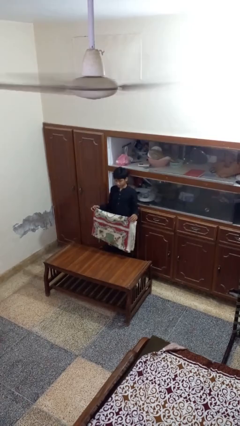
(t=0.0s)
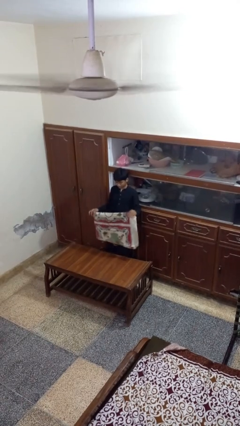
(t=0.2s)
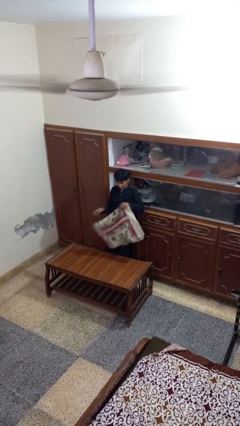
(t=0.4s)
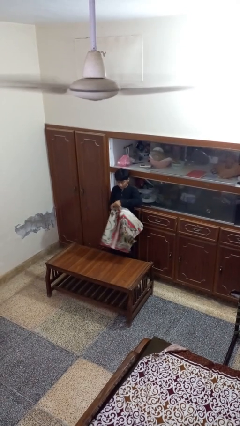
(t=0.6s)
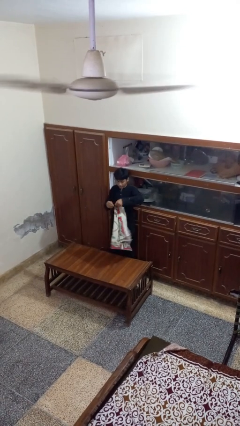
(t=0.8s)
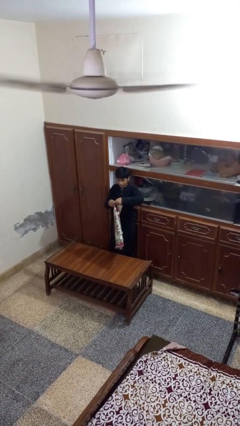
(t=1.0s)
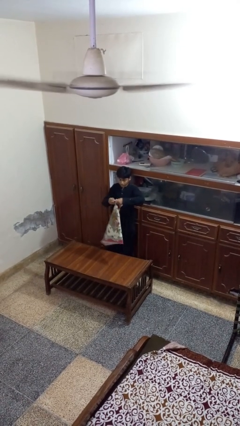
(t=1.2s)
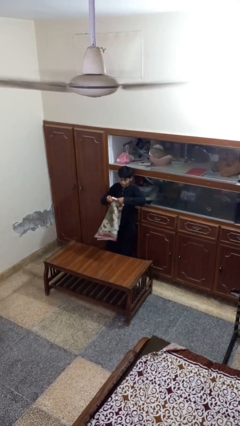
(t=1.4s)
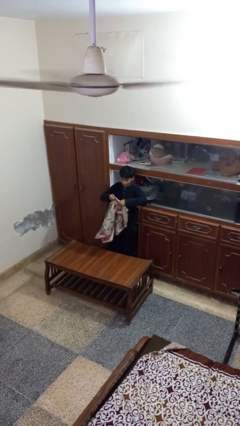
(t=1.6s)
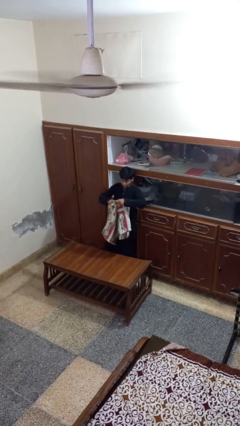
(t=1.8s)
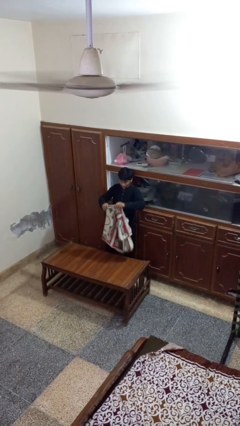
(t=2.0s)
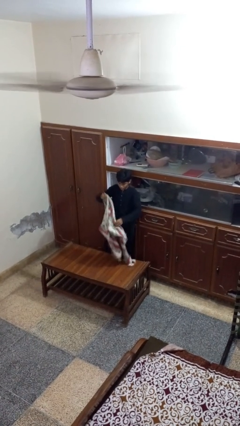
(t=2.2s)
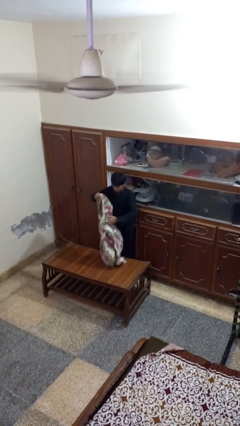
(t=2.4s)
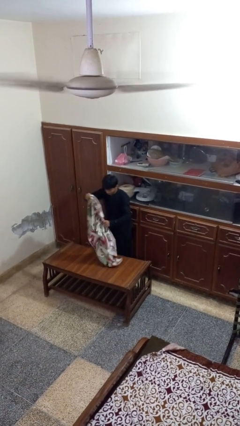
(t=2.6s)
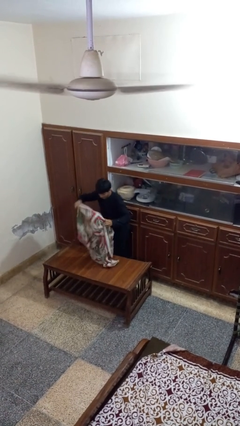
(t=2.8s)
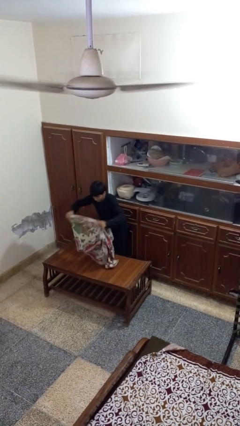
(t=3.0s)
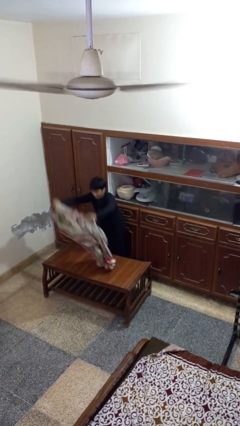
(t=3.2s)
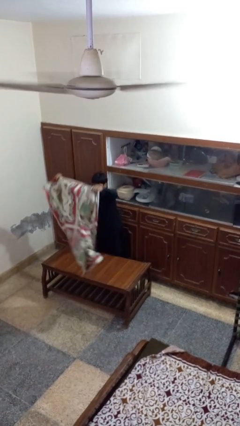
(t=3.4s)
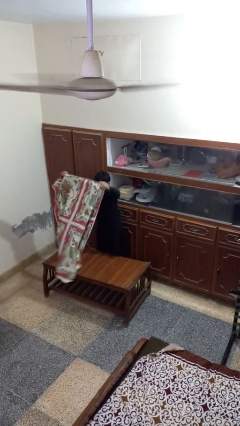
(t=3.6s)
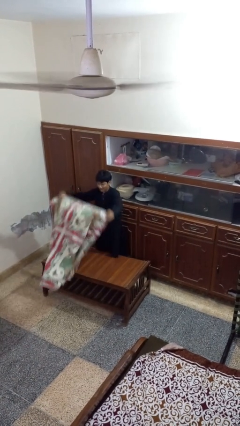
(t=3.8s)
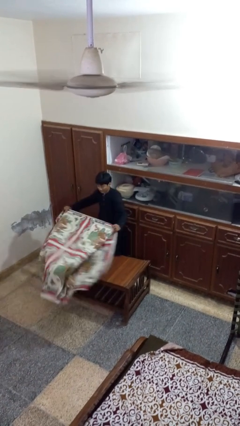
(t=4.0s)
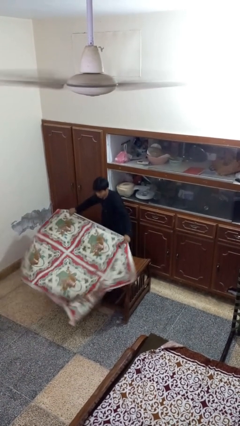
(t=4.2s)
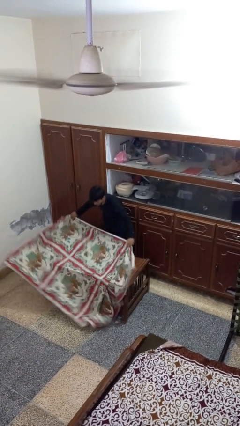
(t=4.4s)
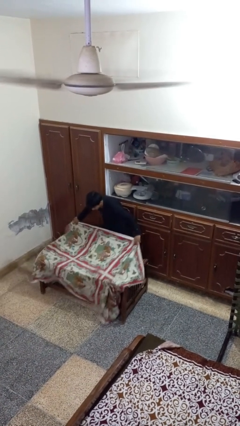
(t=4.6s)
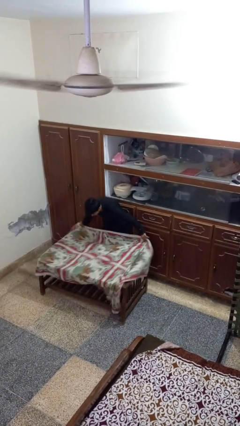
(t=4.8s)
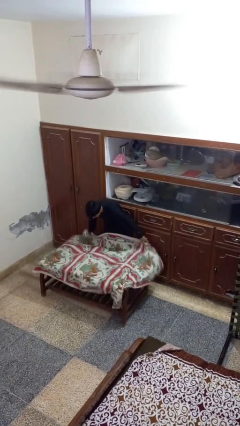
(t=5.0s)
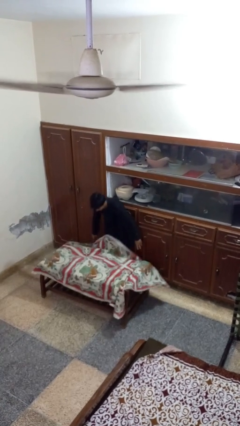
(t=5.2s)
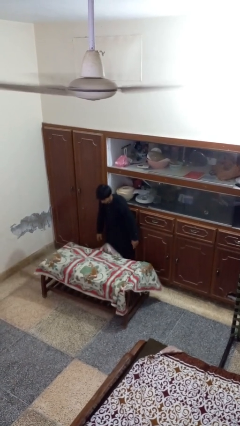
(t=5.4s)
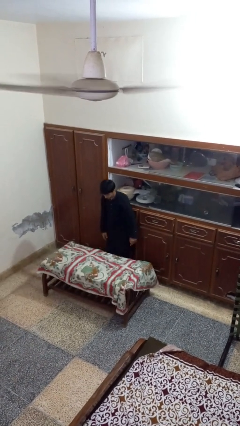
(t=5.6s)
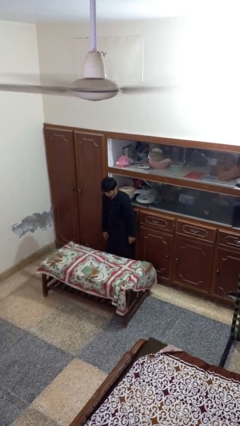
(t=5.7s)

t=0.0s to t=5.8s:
person spreads tablecloth

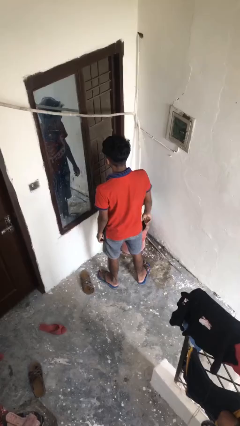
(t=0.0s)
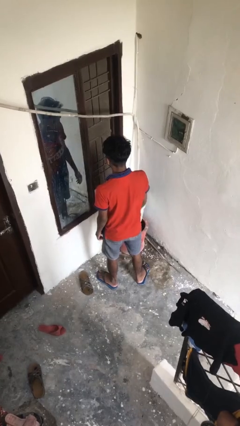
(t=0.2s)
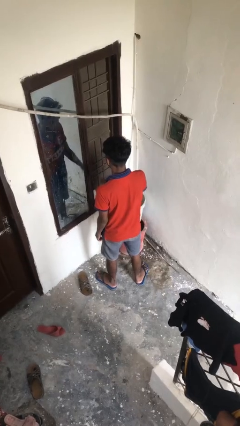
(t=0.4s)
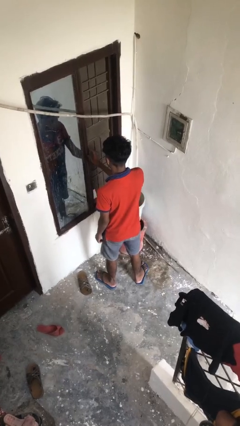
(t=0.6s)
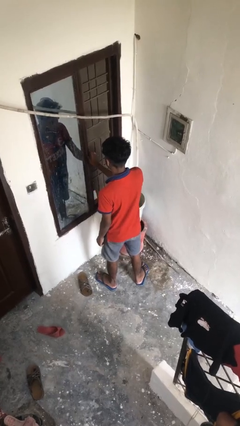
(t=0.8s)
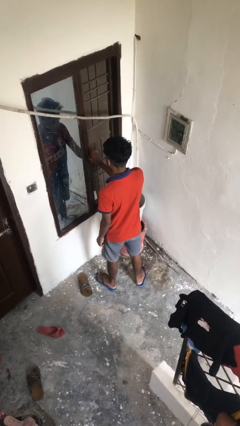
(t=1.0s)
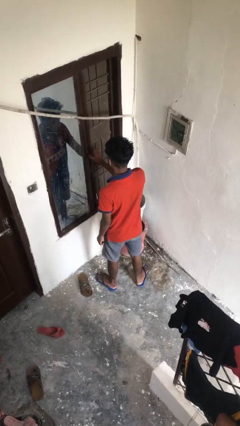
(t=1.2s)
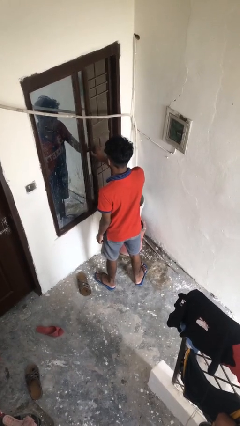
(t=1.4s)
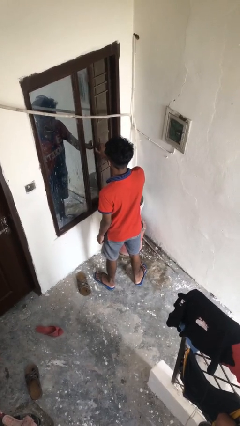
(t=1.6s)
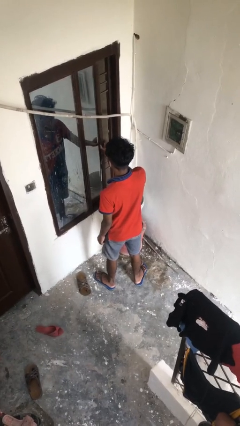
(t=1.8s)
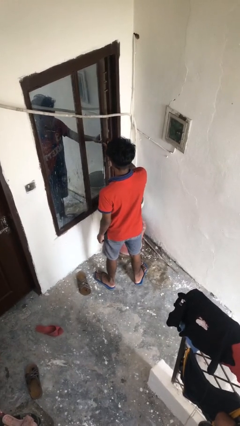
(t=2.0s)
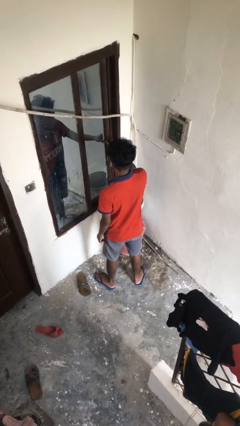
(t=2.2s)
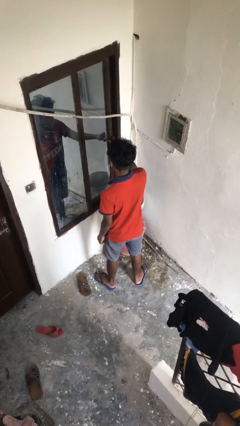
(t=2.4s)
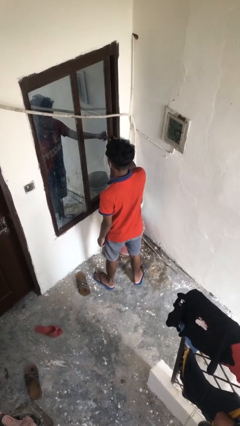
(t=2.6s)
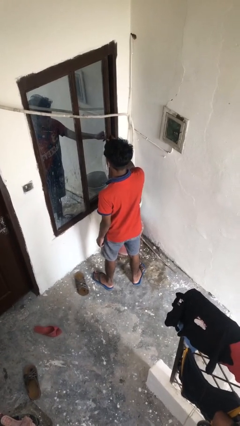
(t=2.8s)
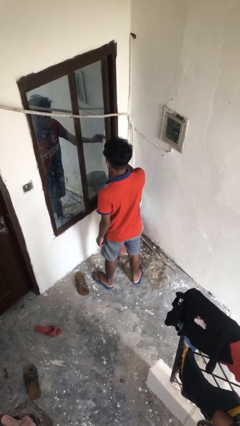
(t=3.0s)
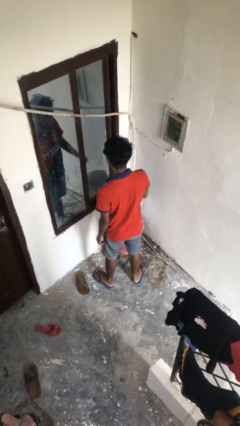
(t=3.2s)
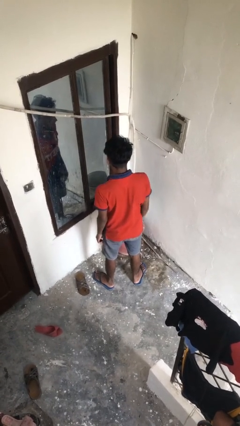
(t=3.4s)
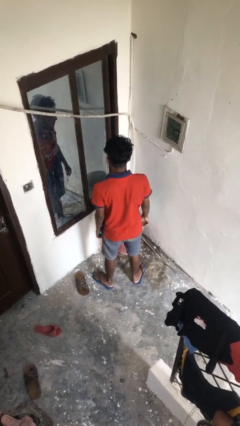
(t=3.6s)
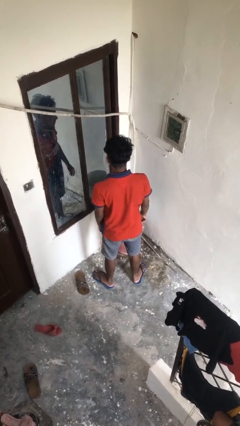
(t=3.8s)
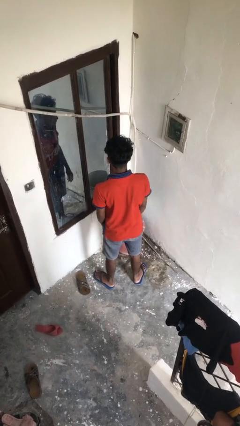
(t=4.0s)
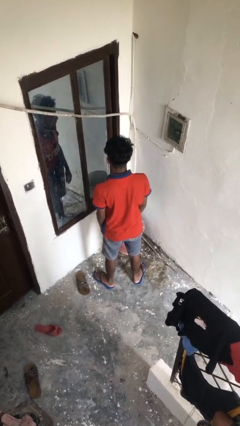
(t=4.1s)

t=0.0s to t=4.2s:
person closes home window

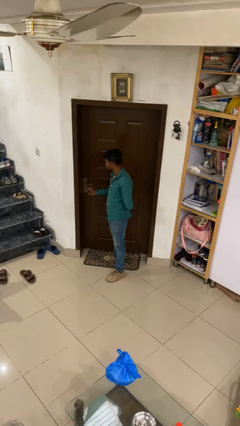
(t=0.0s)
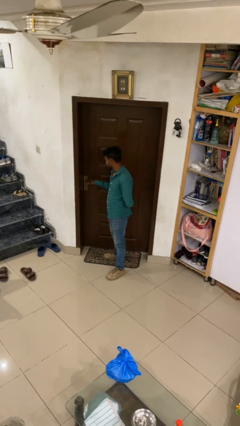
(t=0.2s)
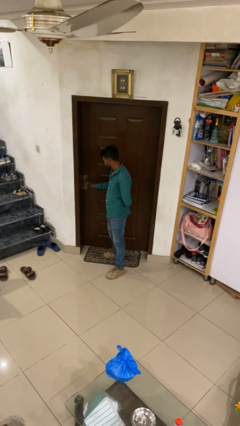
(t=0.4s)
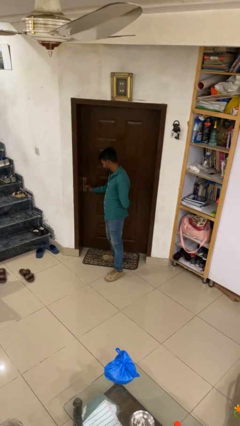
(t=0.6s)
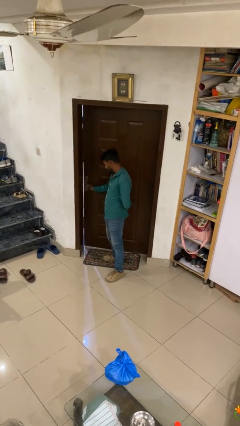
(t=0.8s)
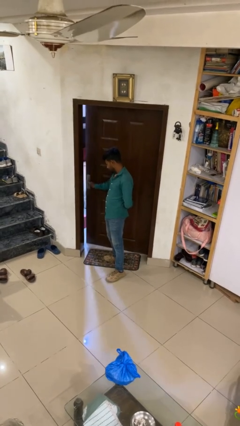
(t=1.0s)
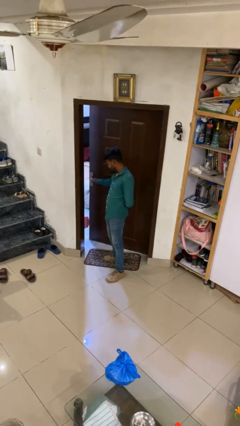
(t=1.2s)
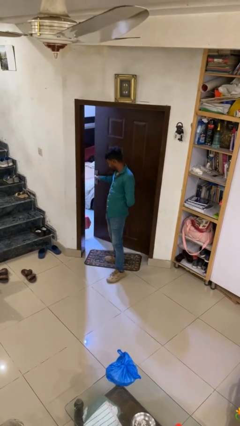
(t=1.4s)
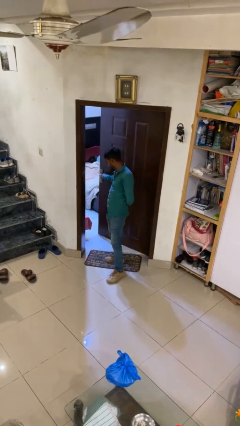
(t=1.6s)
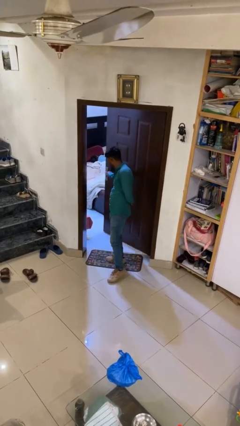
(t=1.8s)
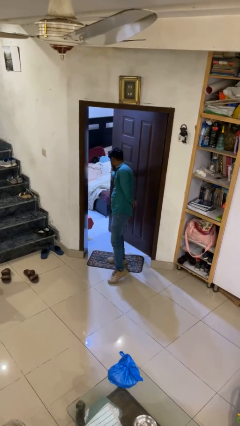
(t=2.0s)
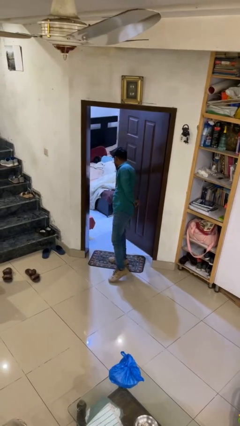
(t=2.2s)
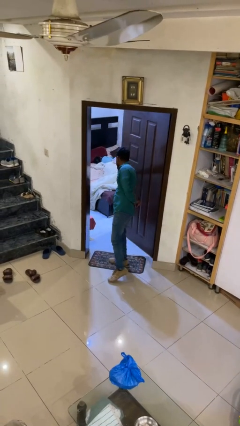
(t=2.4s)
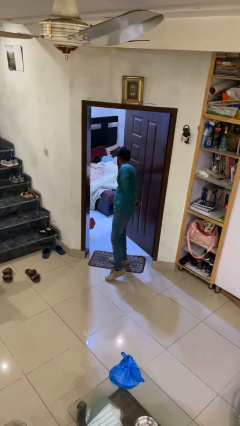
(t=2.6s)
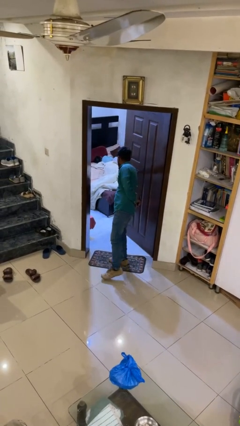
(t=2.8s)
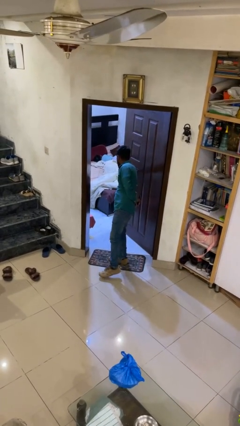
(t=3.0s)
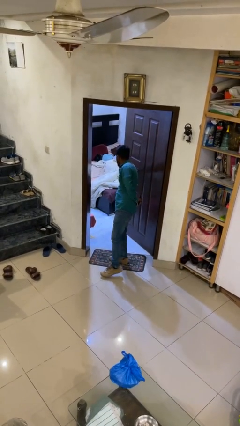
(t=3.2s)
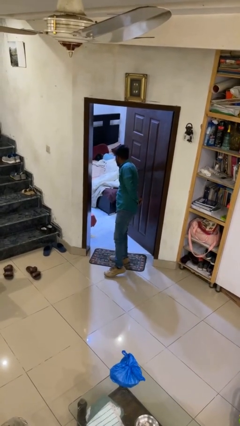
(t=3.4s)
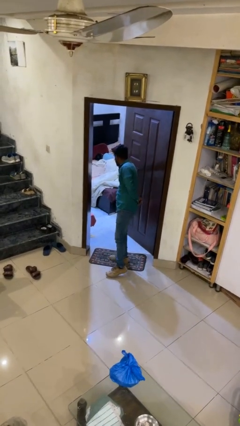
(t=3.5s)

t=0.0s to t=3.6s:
person opens facility door

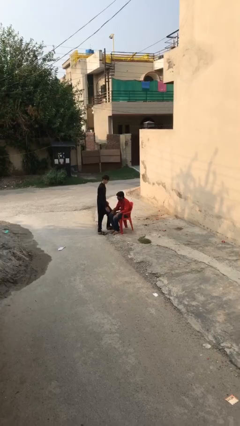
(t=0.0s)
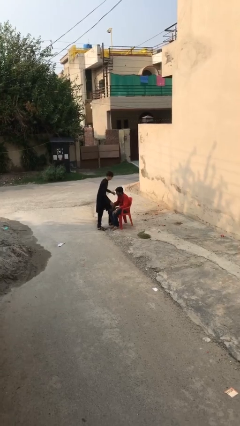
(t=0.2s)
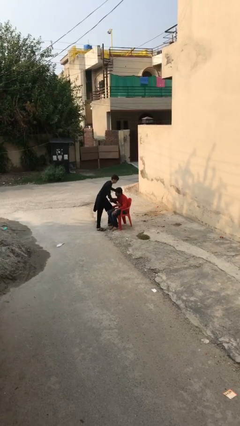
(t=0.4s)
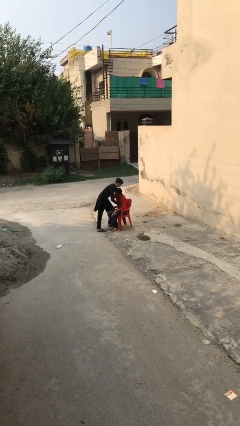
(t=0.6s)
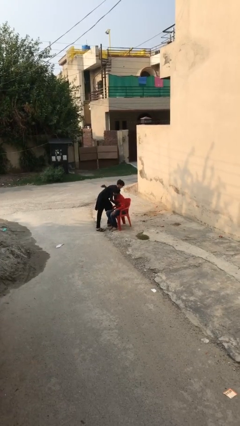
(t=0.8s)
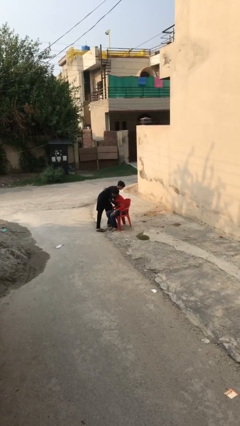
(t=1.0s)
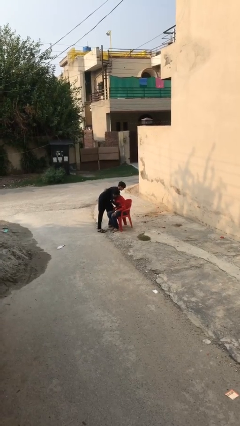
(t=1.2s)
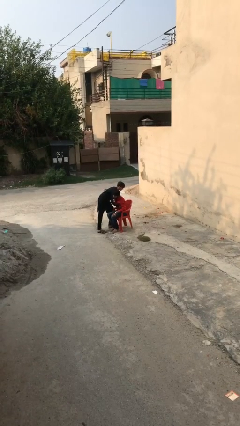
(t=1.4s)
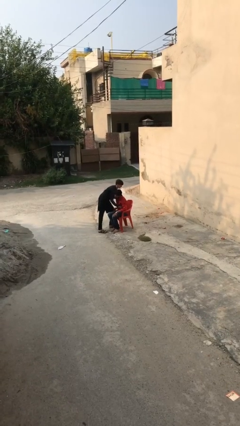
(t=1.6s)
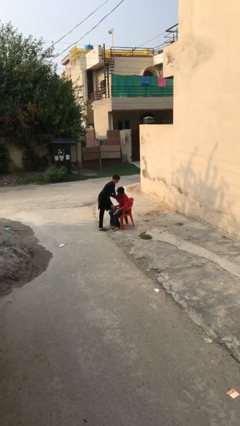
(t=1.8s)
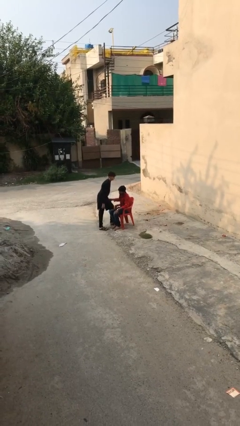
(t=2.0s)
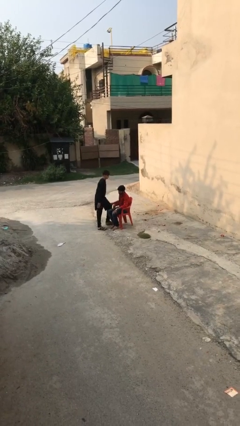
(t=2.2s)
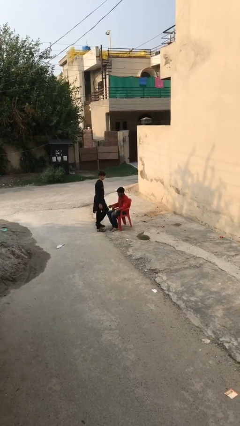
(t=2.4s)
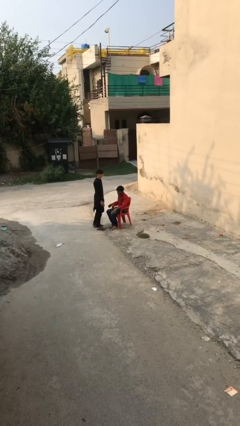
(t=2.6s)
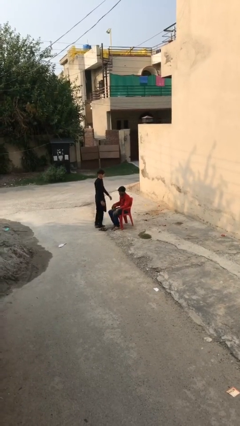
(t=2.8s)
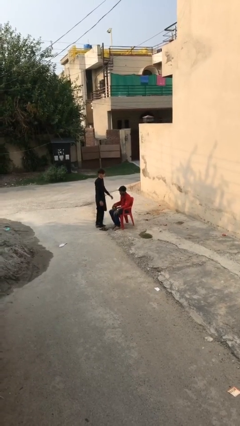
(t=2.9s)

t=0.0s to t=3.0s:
person embraces person

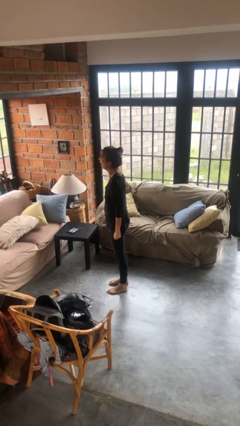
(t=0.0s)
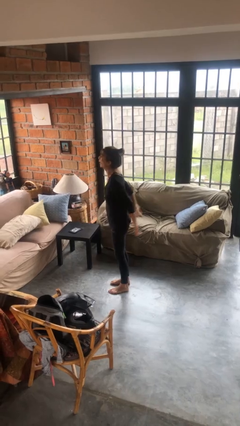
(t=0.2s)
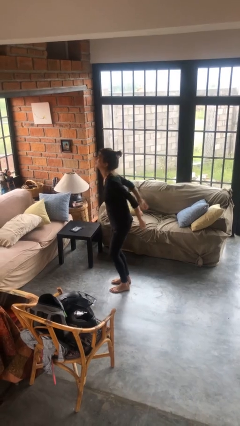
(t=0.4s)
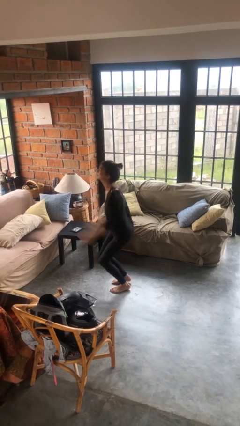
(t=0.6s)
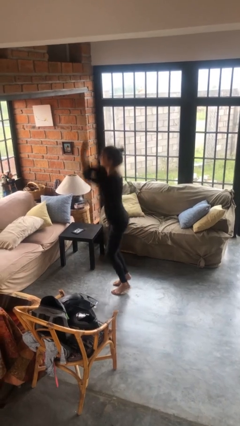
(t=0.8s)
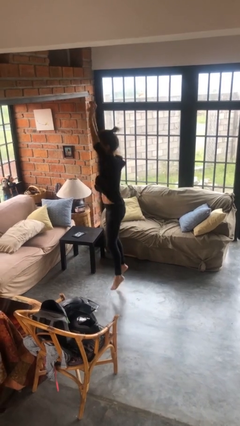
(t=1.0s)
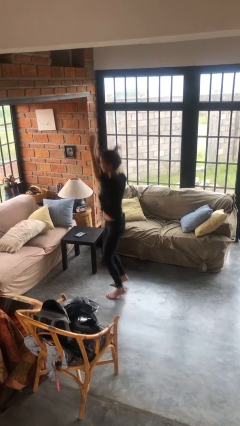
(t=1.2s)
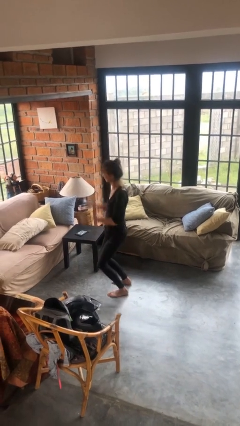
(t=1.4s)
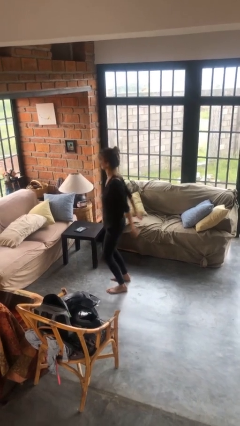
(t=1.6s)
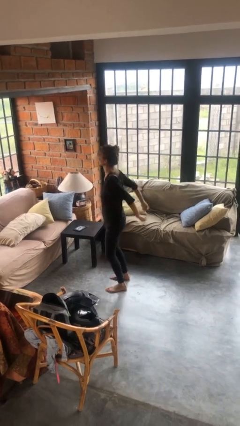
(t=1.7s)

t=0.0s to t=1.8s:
person jumps
